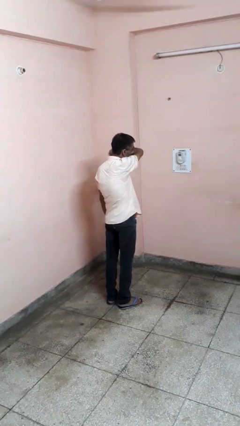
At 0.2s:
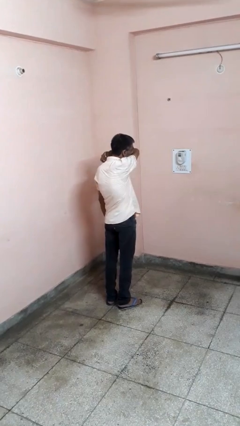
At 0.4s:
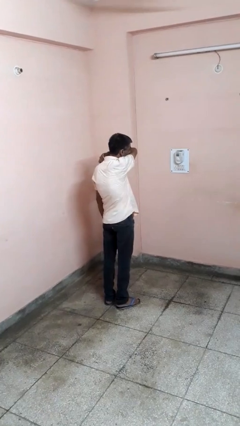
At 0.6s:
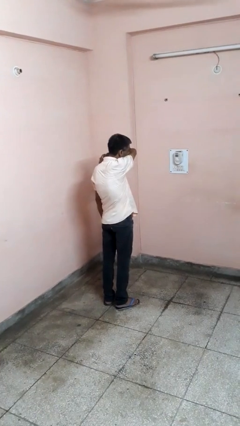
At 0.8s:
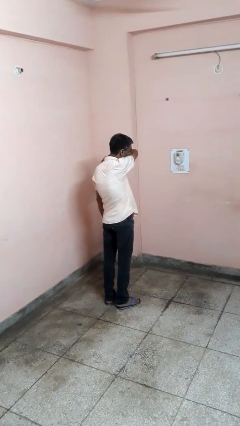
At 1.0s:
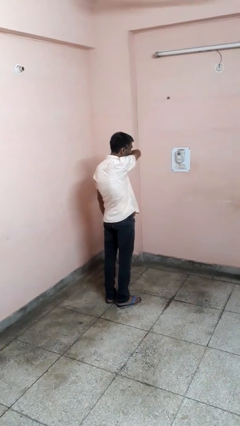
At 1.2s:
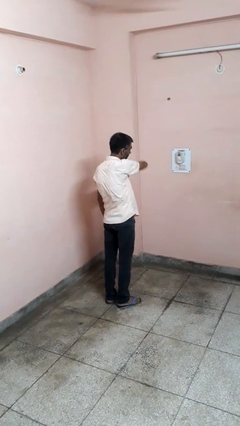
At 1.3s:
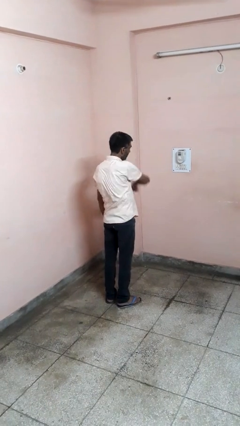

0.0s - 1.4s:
person sneezes into arm

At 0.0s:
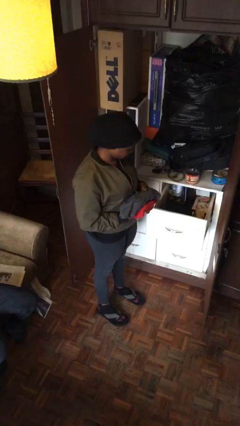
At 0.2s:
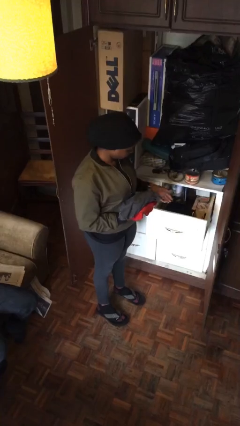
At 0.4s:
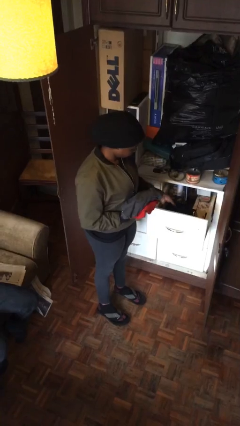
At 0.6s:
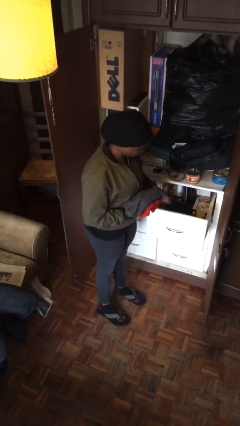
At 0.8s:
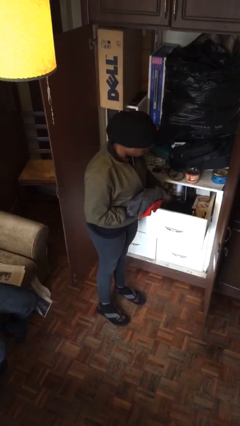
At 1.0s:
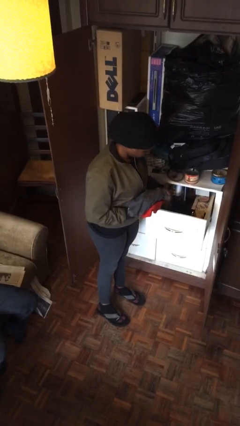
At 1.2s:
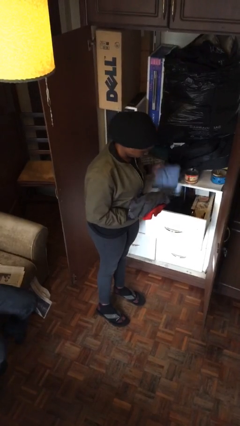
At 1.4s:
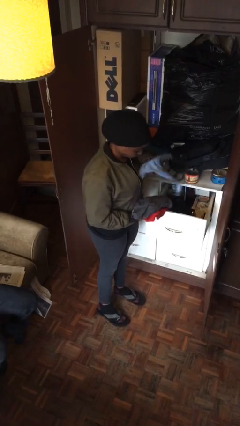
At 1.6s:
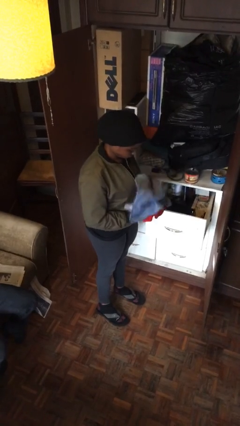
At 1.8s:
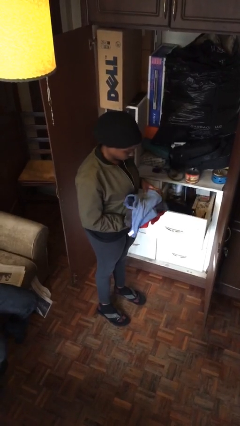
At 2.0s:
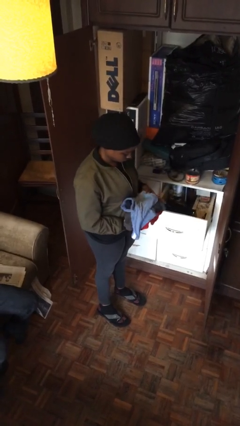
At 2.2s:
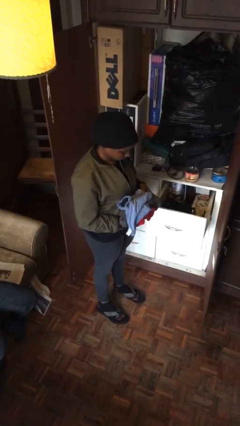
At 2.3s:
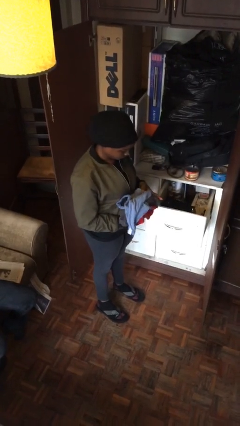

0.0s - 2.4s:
person takes clothes from dresser

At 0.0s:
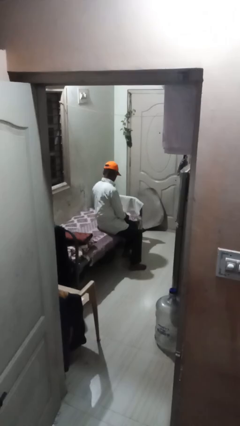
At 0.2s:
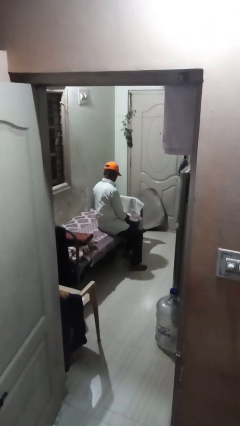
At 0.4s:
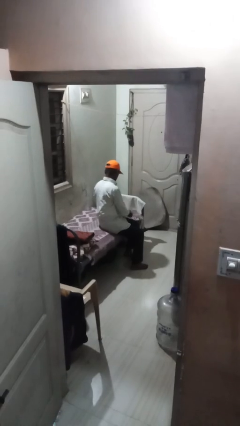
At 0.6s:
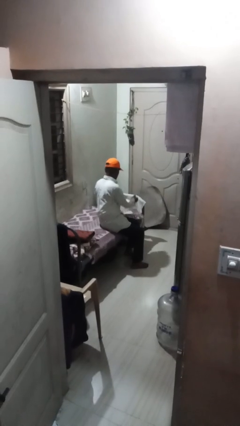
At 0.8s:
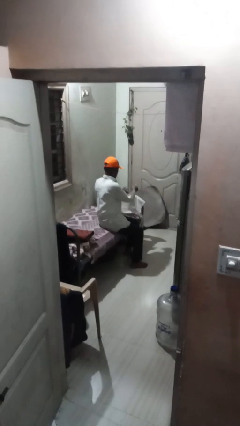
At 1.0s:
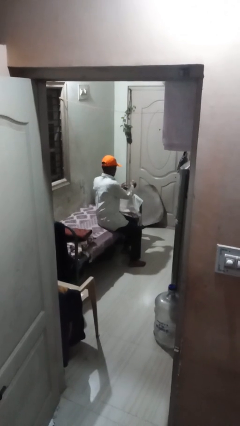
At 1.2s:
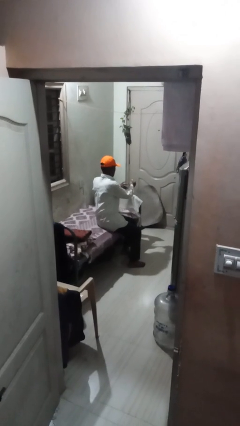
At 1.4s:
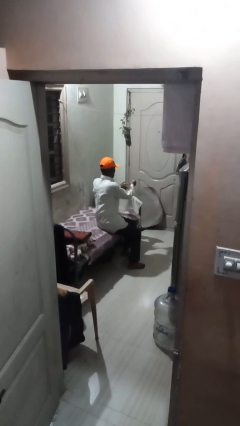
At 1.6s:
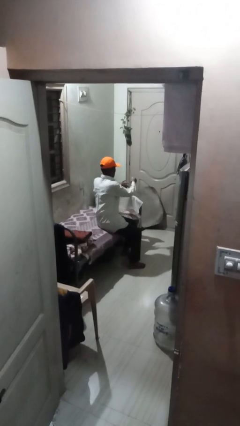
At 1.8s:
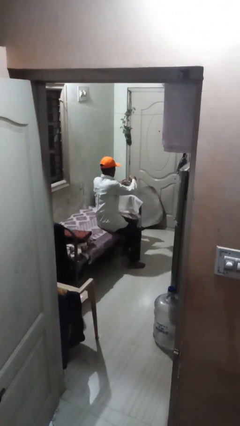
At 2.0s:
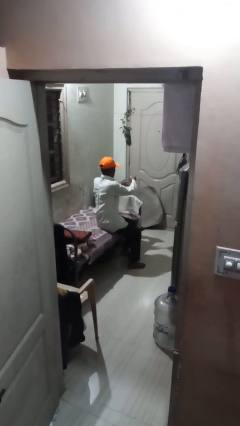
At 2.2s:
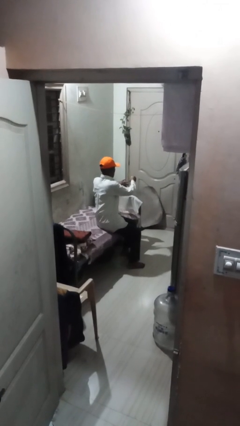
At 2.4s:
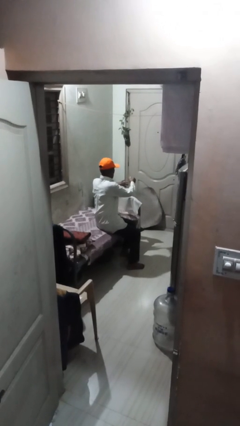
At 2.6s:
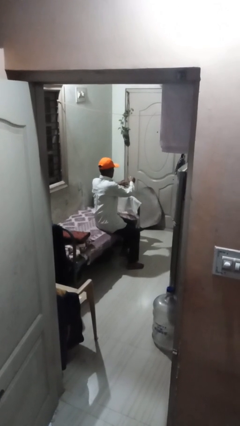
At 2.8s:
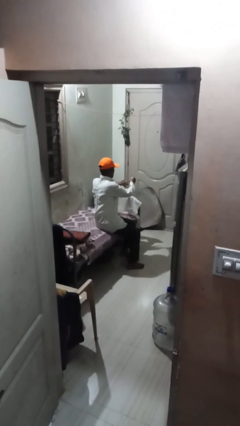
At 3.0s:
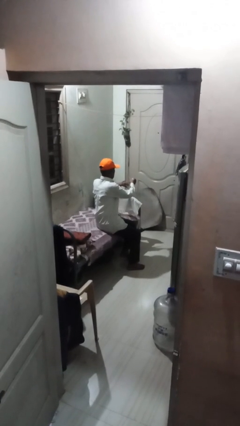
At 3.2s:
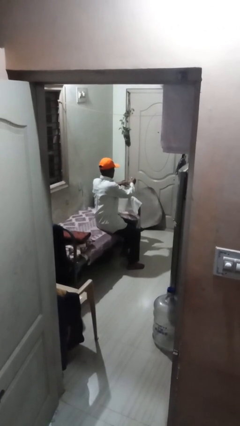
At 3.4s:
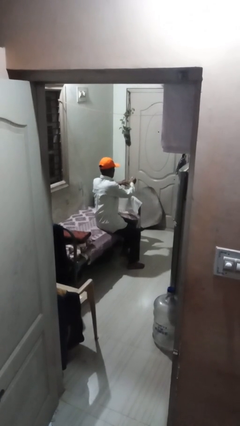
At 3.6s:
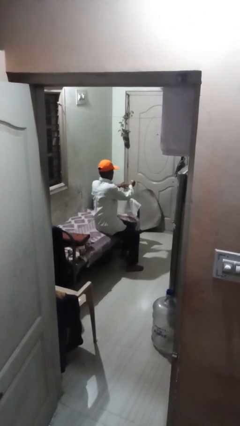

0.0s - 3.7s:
person clips fingernails

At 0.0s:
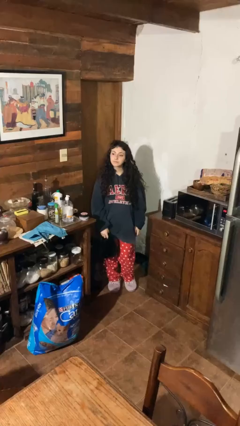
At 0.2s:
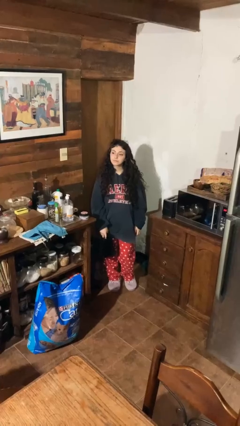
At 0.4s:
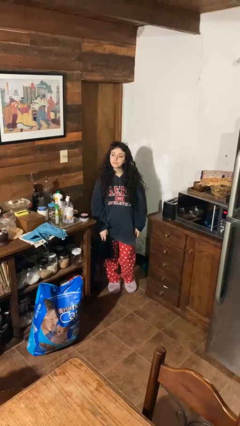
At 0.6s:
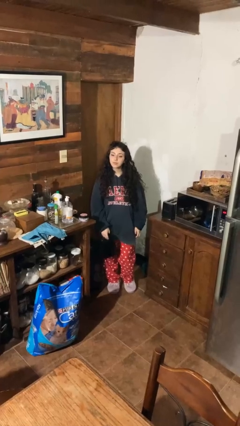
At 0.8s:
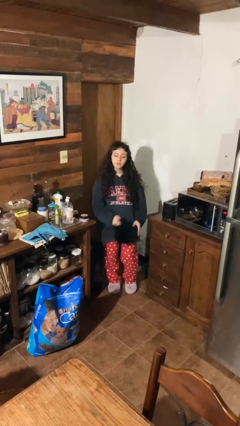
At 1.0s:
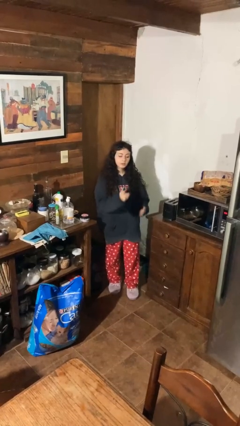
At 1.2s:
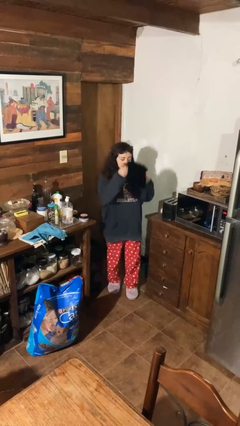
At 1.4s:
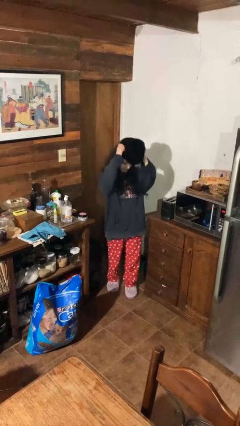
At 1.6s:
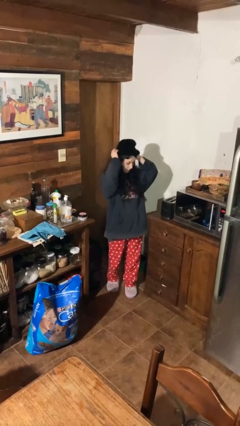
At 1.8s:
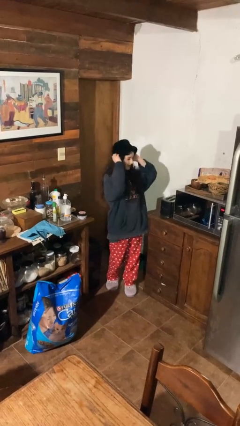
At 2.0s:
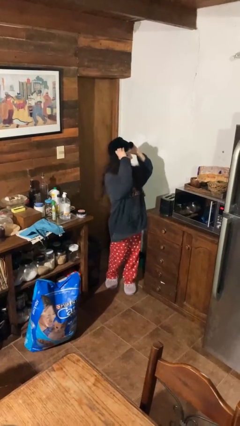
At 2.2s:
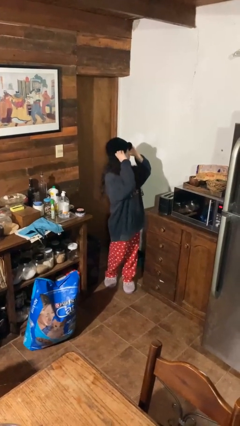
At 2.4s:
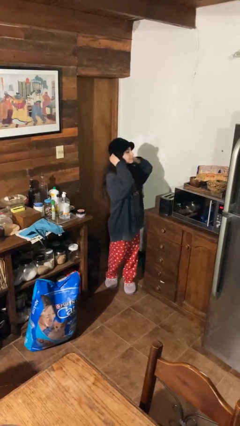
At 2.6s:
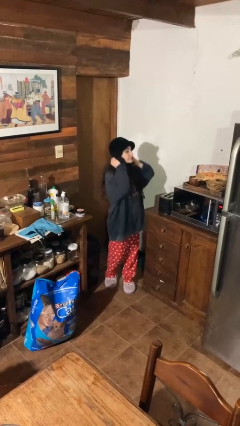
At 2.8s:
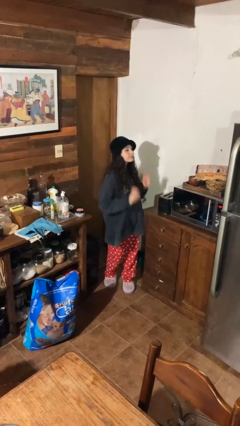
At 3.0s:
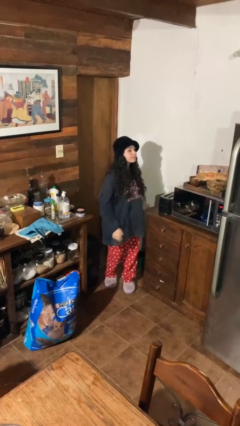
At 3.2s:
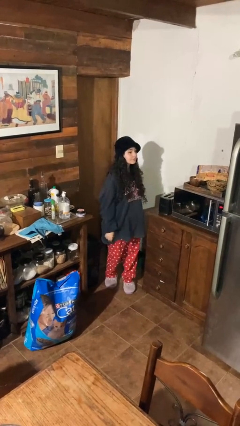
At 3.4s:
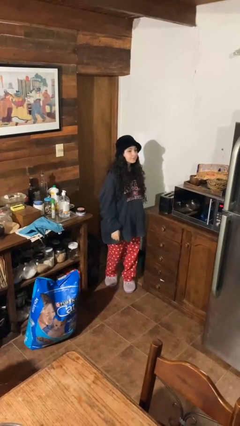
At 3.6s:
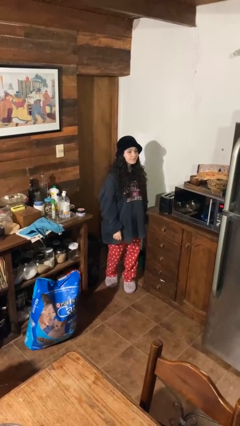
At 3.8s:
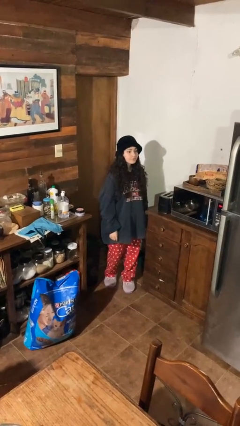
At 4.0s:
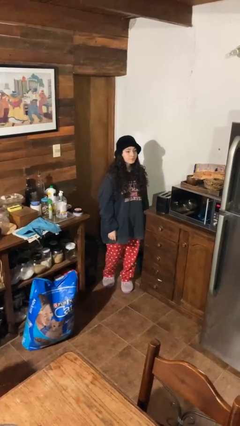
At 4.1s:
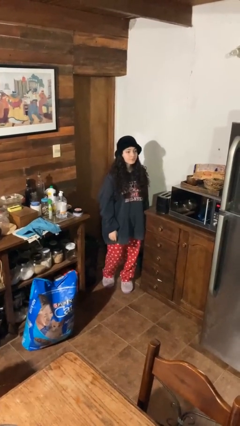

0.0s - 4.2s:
person puts on hat

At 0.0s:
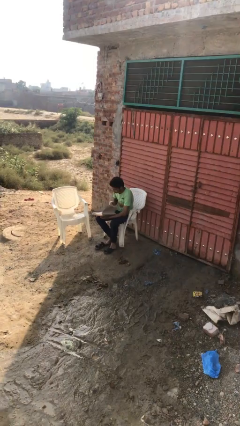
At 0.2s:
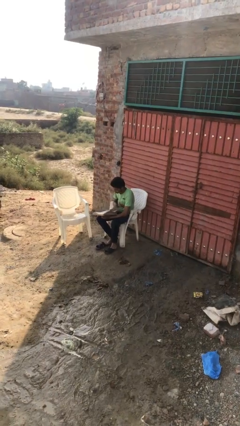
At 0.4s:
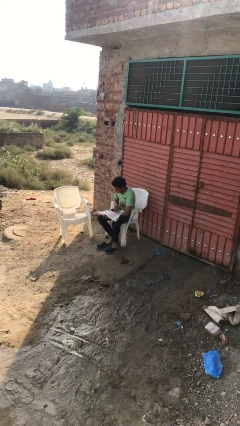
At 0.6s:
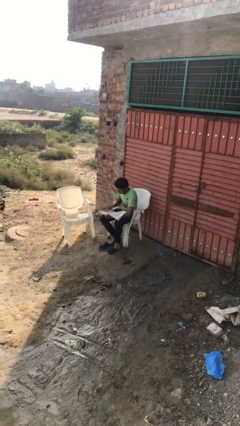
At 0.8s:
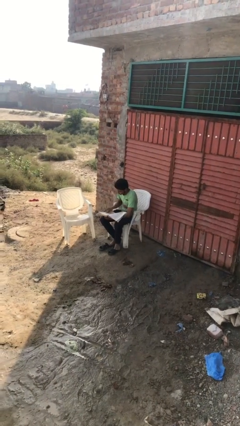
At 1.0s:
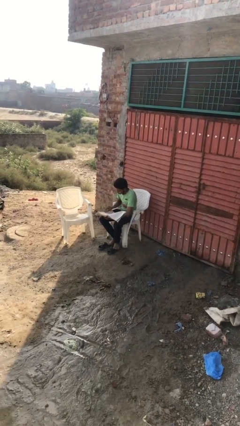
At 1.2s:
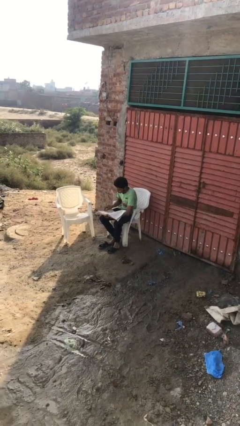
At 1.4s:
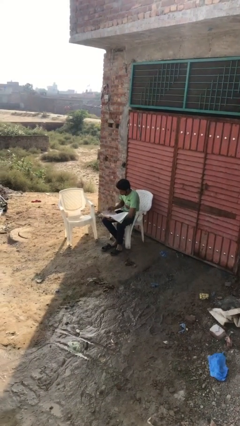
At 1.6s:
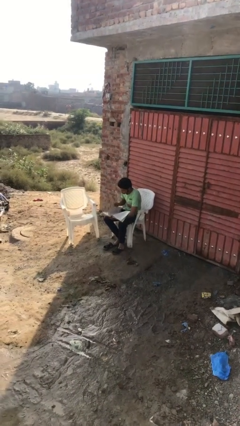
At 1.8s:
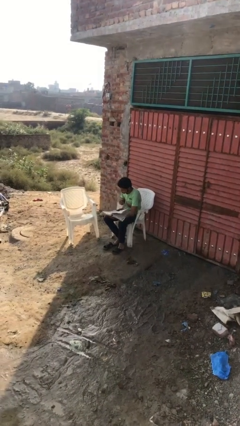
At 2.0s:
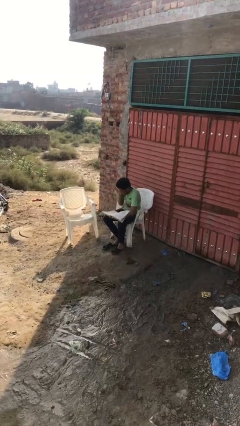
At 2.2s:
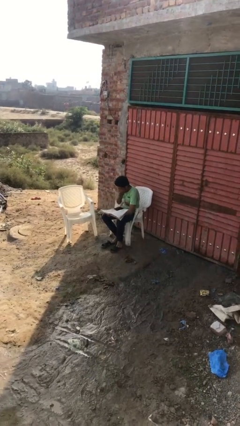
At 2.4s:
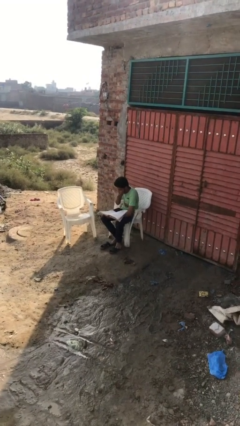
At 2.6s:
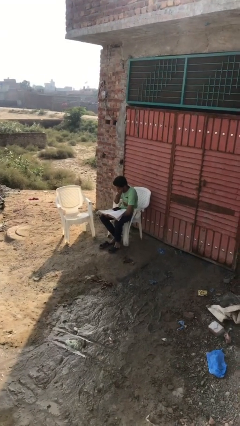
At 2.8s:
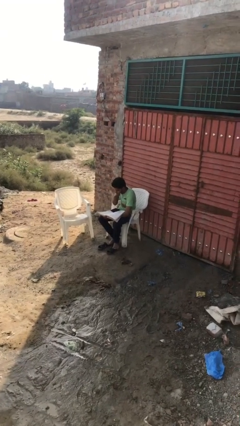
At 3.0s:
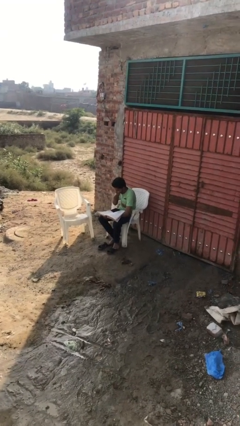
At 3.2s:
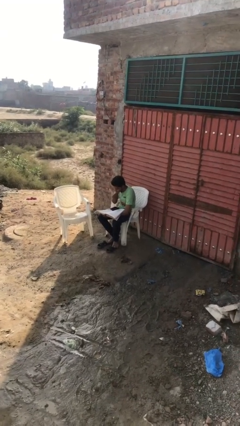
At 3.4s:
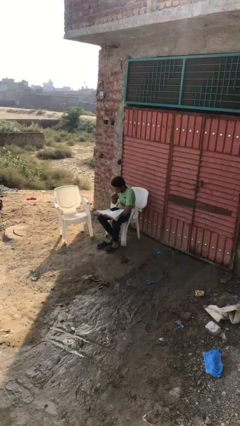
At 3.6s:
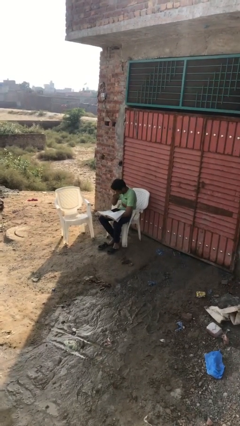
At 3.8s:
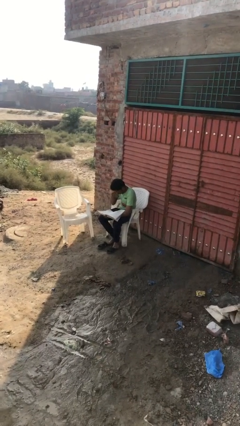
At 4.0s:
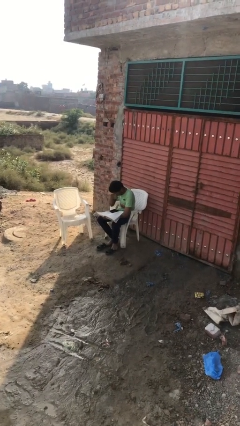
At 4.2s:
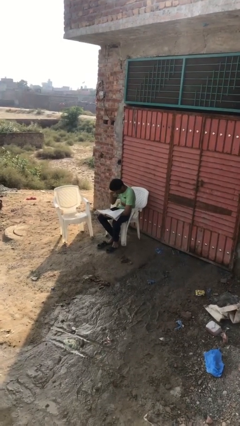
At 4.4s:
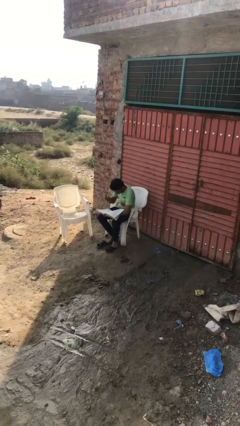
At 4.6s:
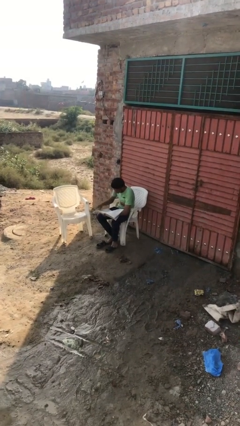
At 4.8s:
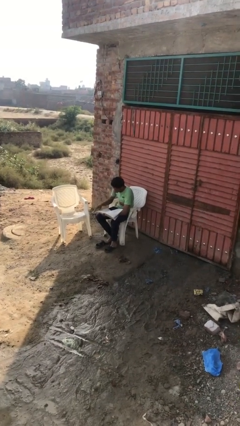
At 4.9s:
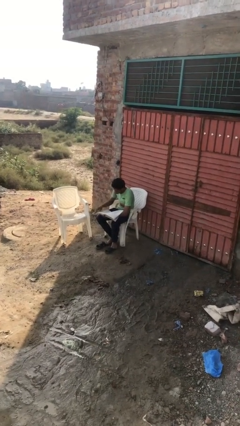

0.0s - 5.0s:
person reads document

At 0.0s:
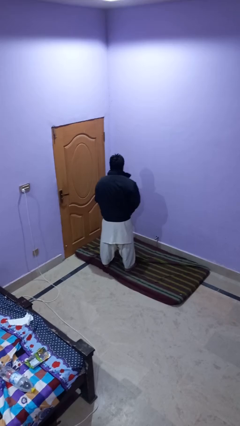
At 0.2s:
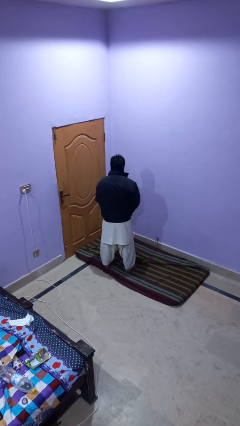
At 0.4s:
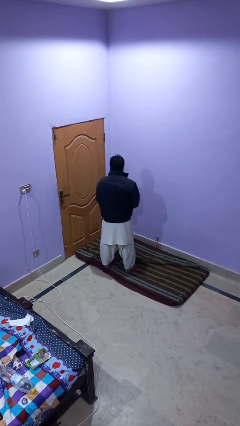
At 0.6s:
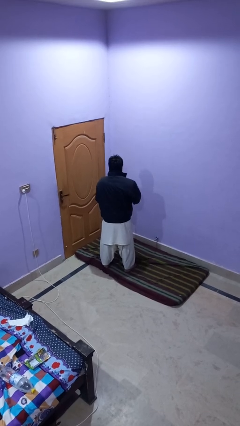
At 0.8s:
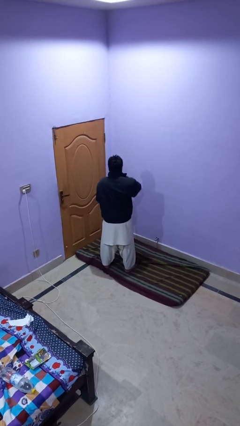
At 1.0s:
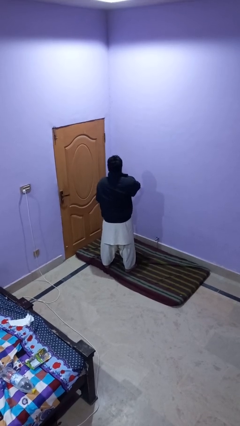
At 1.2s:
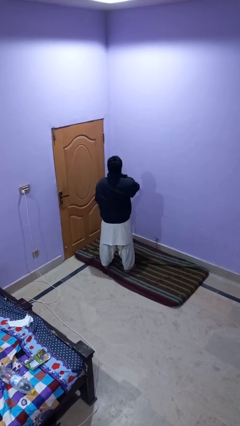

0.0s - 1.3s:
person zips up jacket
